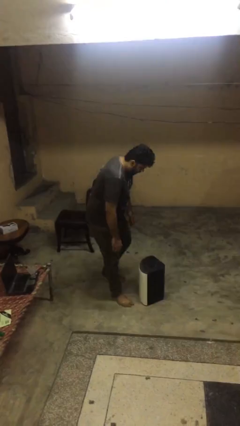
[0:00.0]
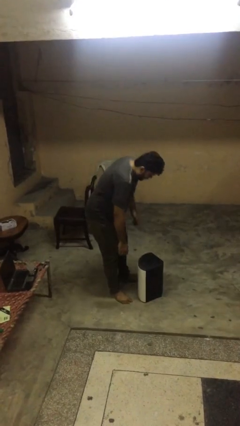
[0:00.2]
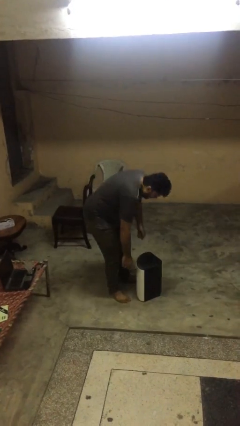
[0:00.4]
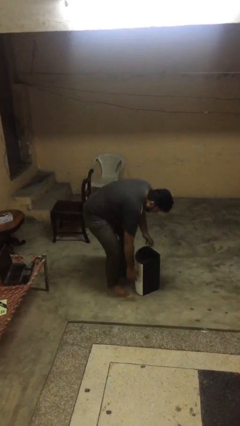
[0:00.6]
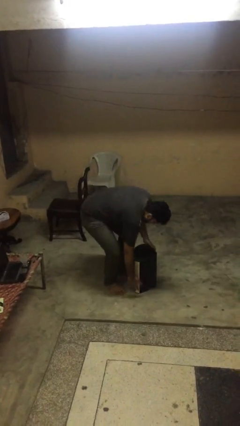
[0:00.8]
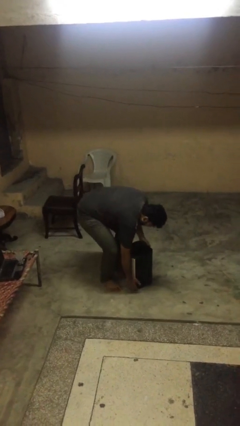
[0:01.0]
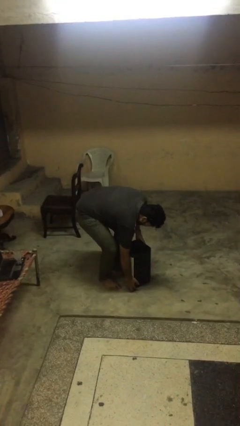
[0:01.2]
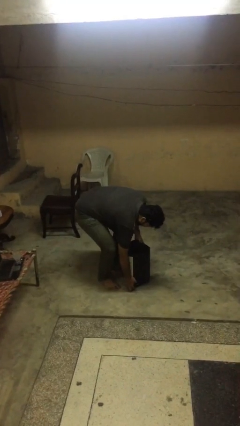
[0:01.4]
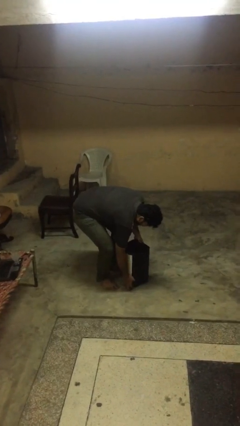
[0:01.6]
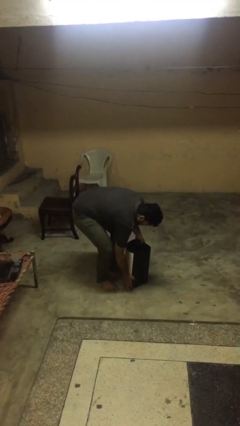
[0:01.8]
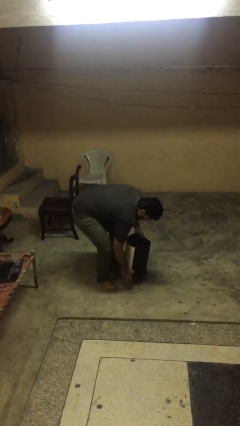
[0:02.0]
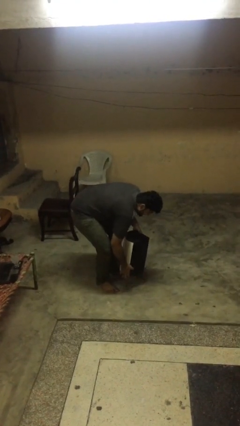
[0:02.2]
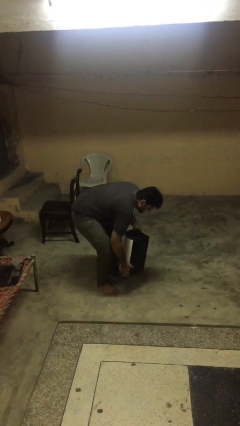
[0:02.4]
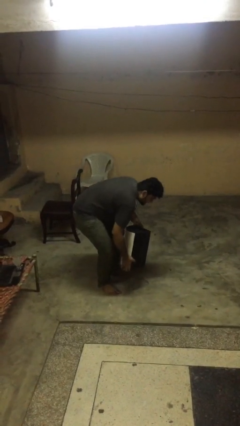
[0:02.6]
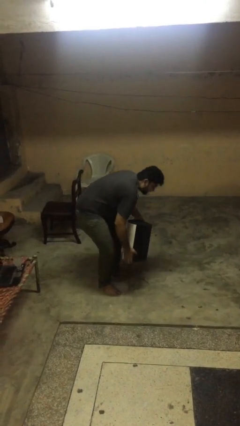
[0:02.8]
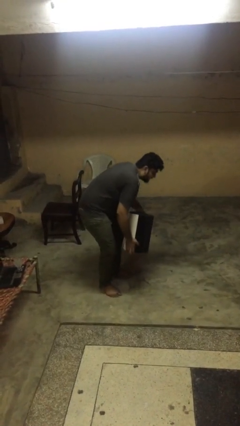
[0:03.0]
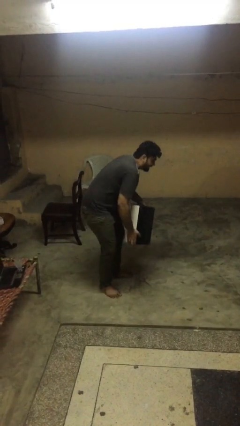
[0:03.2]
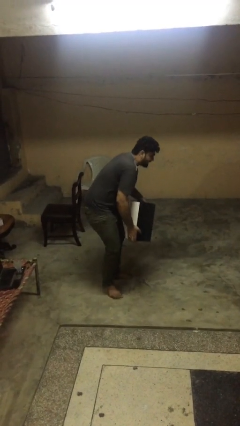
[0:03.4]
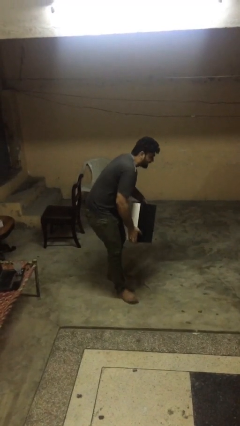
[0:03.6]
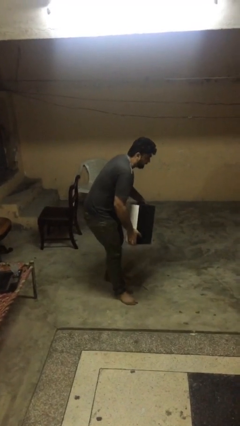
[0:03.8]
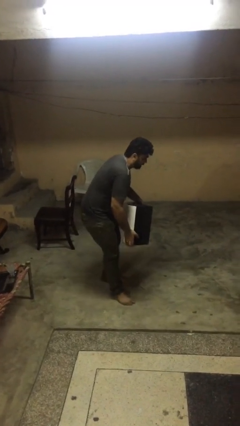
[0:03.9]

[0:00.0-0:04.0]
person picks up object from floor

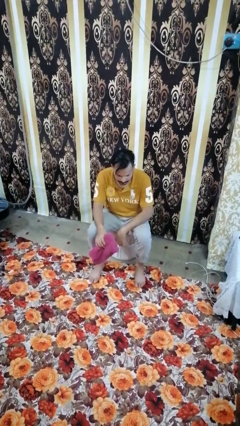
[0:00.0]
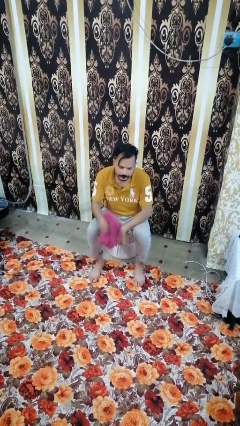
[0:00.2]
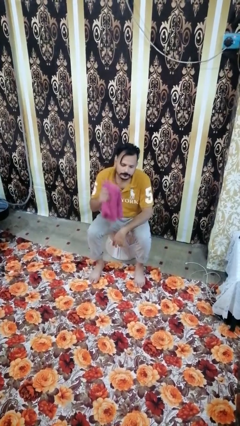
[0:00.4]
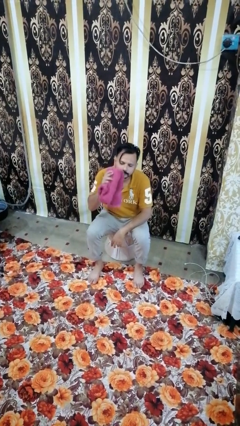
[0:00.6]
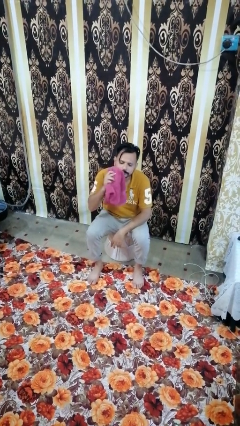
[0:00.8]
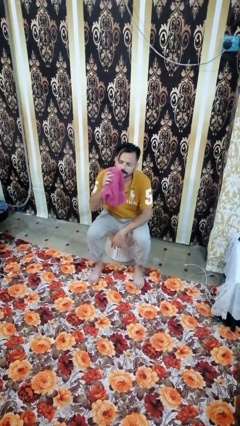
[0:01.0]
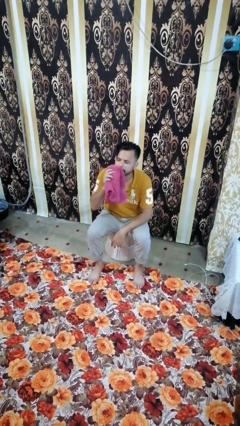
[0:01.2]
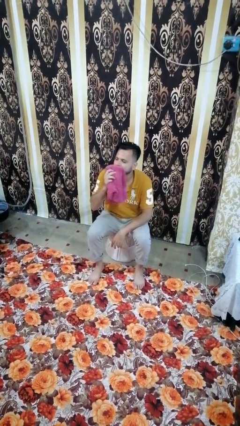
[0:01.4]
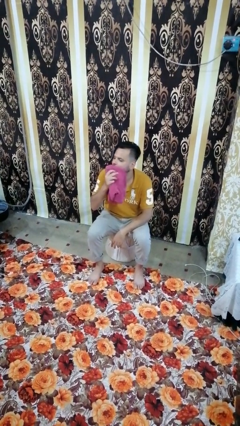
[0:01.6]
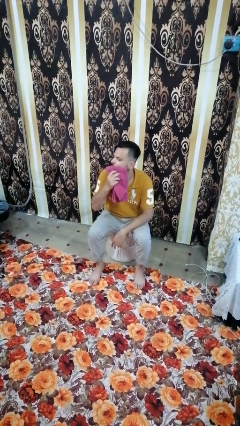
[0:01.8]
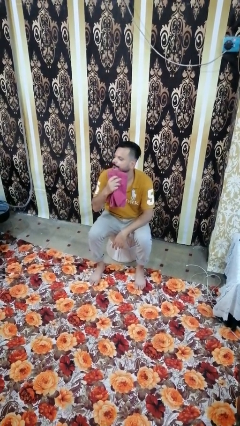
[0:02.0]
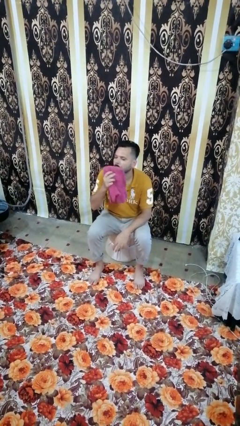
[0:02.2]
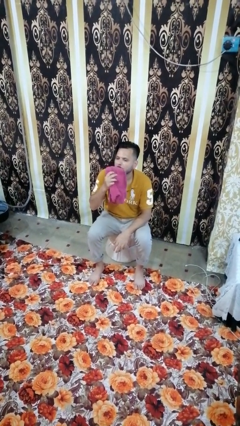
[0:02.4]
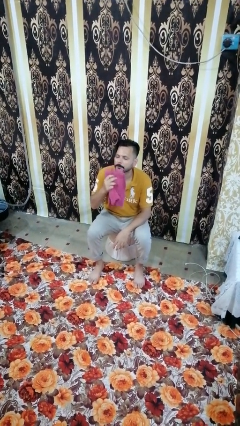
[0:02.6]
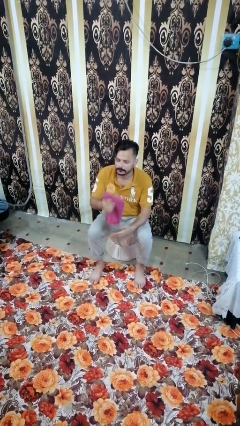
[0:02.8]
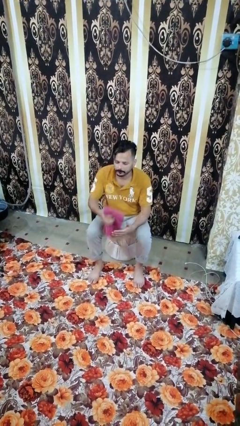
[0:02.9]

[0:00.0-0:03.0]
person wipes mouth with napkin

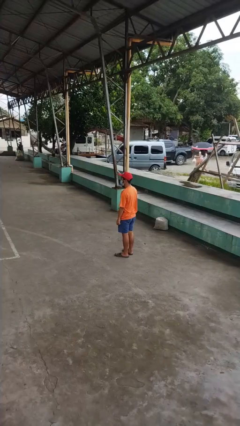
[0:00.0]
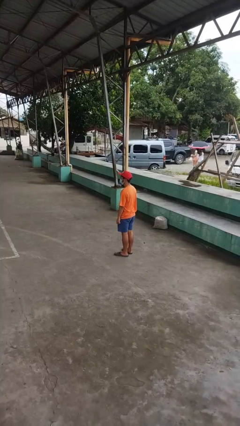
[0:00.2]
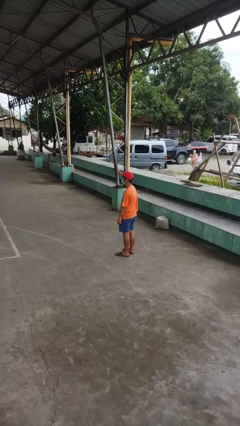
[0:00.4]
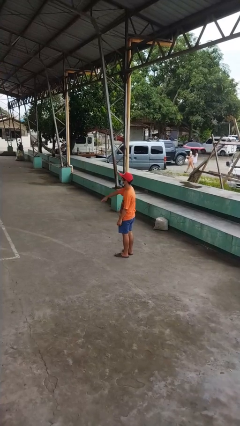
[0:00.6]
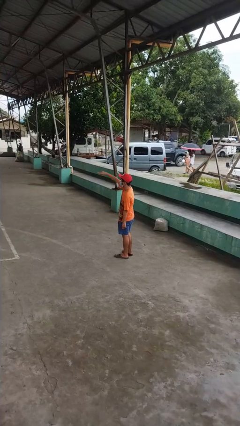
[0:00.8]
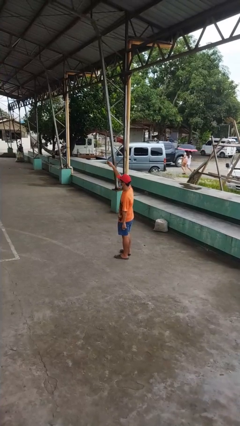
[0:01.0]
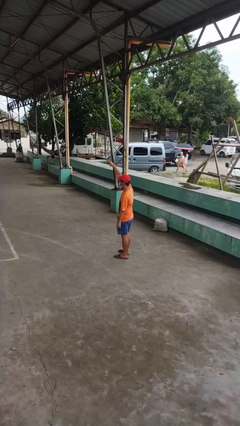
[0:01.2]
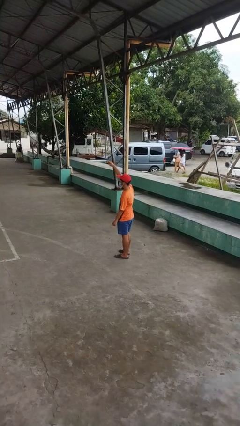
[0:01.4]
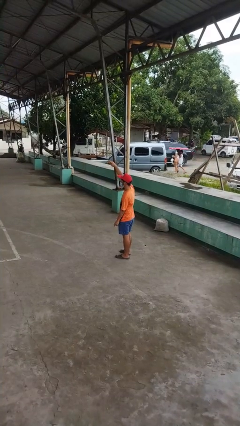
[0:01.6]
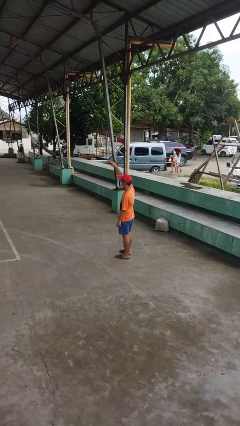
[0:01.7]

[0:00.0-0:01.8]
person gestures swipe up

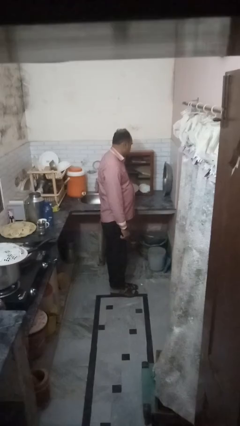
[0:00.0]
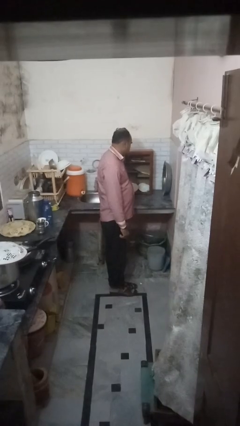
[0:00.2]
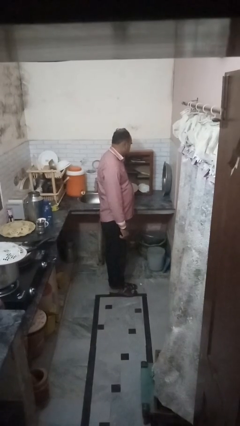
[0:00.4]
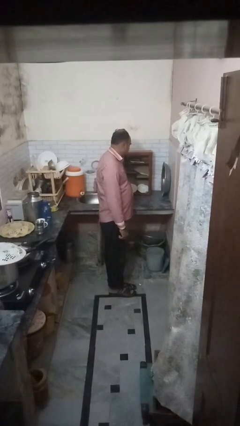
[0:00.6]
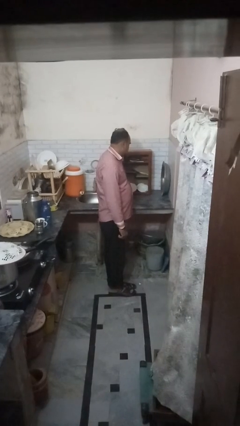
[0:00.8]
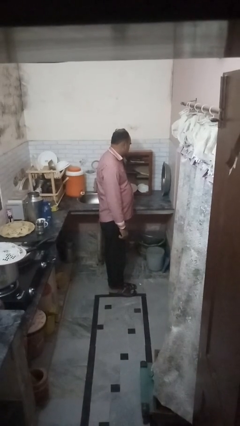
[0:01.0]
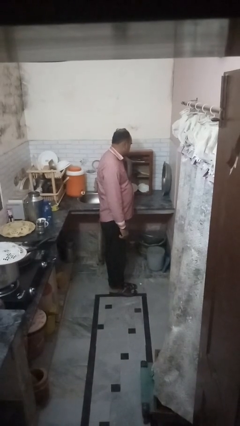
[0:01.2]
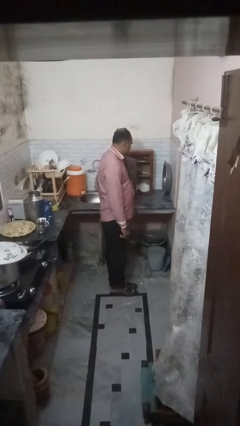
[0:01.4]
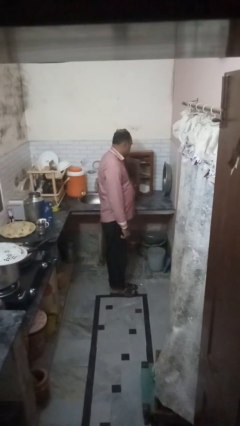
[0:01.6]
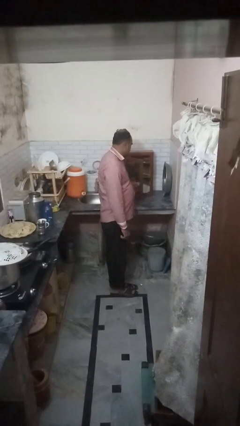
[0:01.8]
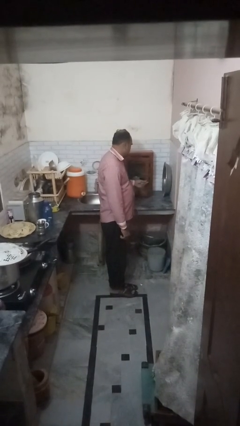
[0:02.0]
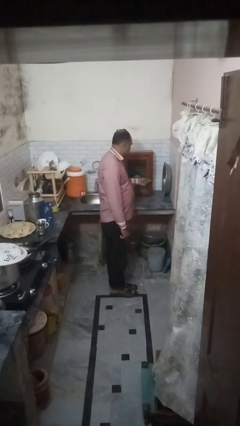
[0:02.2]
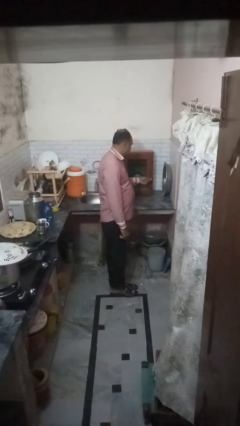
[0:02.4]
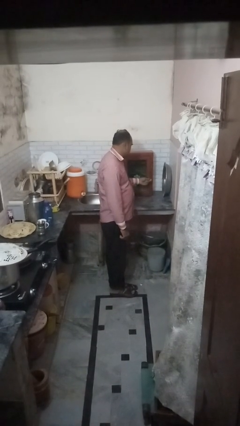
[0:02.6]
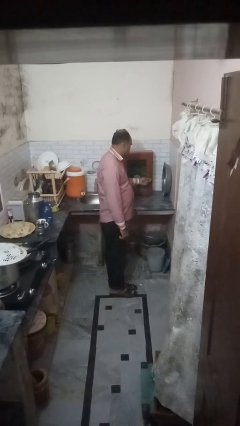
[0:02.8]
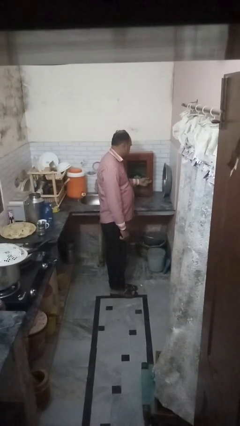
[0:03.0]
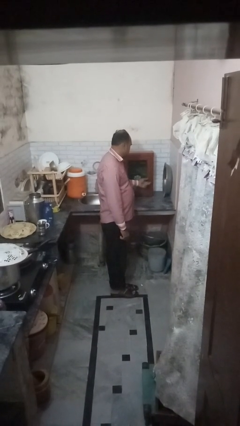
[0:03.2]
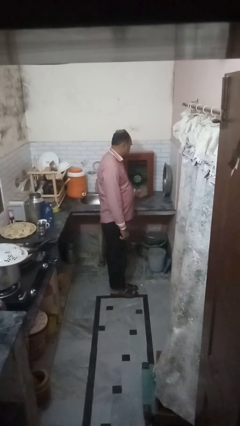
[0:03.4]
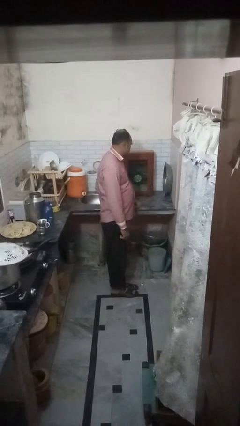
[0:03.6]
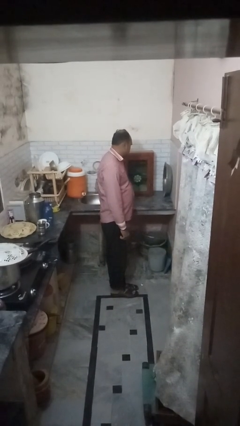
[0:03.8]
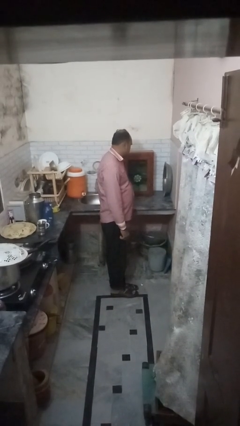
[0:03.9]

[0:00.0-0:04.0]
person closes cabinet

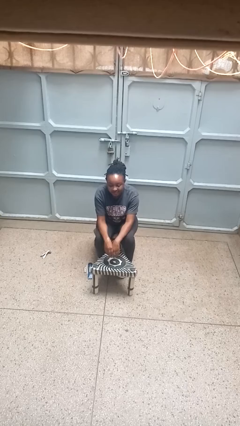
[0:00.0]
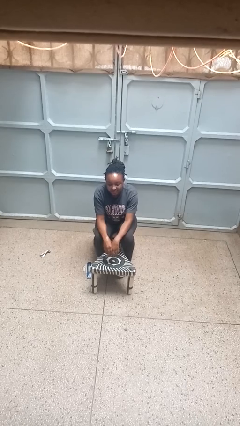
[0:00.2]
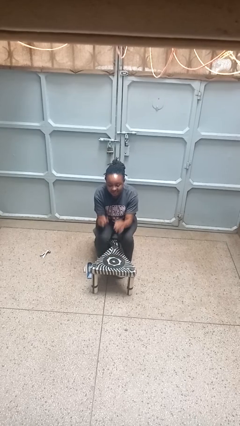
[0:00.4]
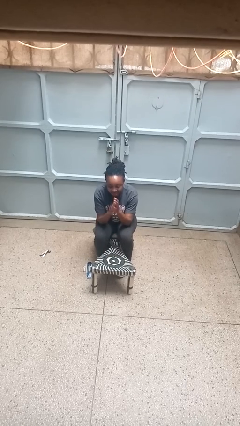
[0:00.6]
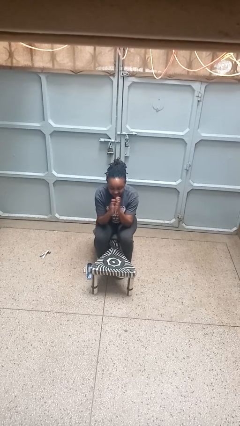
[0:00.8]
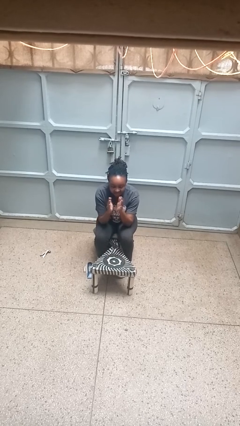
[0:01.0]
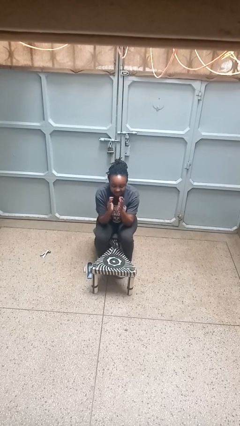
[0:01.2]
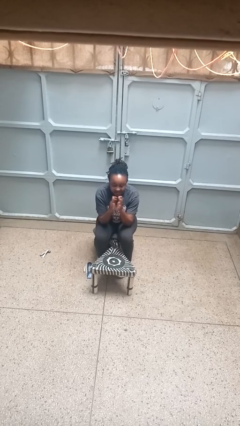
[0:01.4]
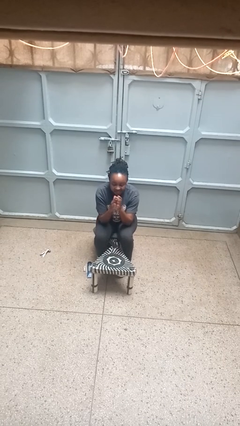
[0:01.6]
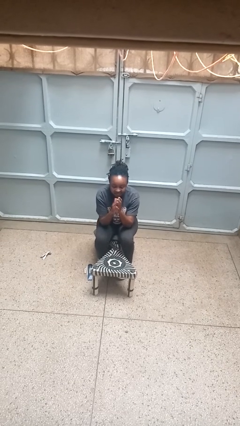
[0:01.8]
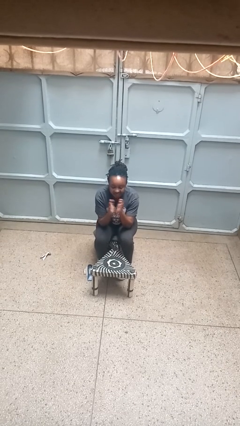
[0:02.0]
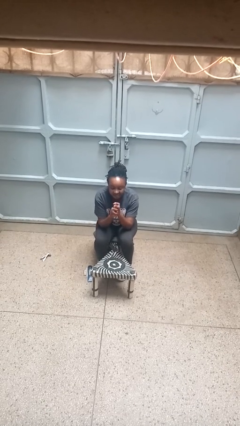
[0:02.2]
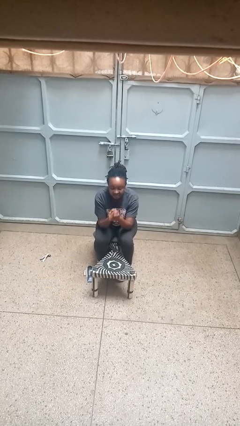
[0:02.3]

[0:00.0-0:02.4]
person claps hands

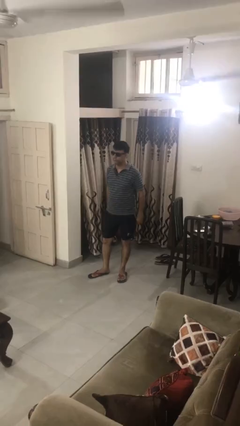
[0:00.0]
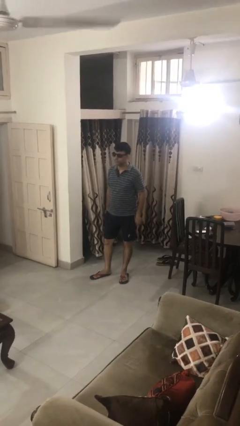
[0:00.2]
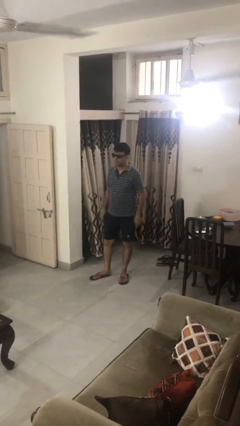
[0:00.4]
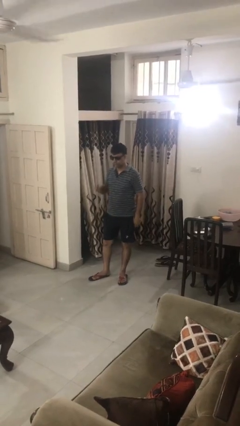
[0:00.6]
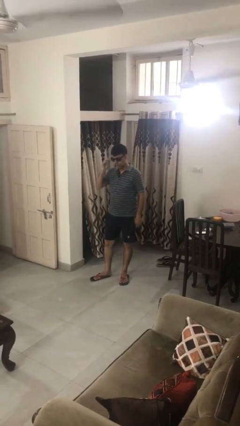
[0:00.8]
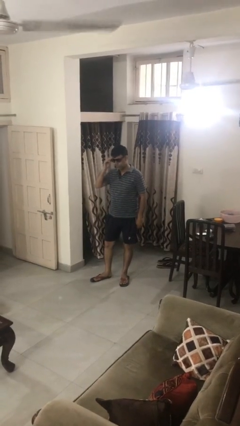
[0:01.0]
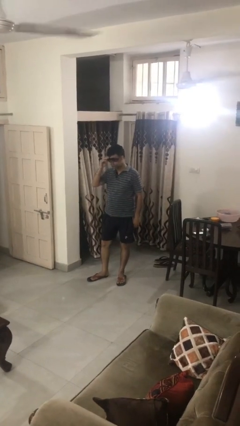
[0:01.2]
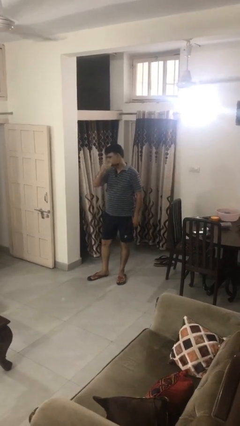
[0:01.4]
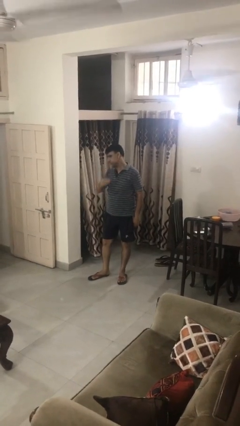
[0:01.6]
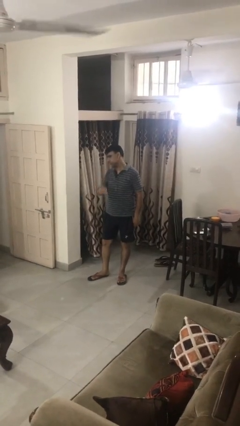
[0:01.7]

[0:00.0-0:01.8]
person takes off sunglasses

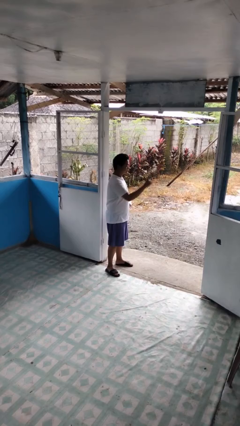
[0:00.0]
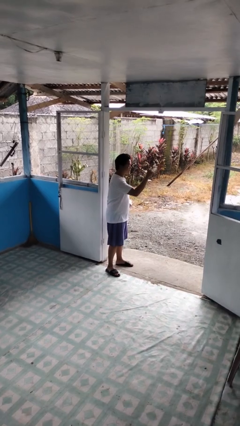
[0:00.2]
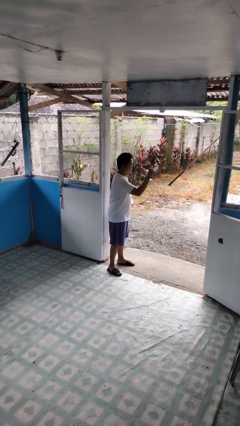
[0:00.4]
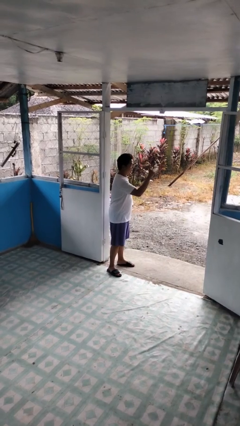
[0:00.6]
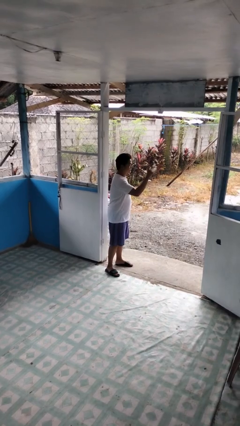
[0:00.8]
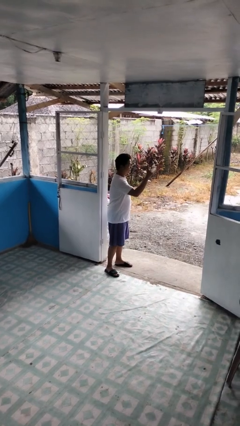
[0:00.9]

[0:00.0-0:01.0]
person gestures number one
